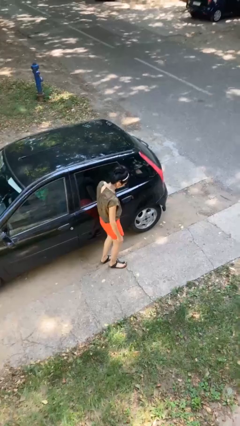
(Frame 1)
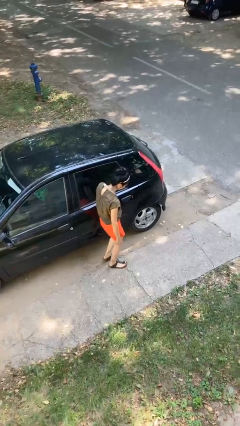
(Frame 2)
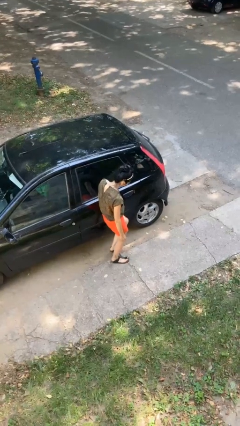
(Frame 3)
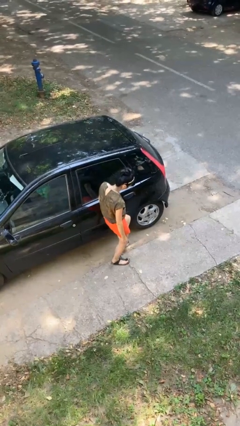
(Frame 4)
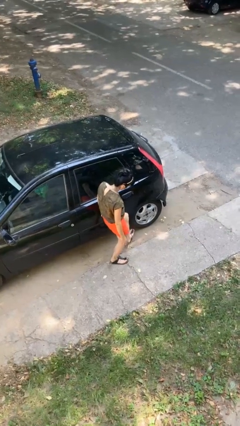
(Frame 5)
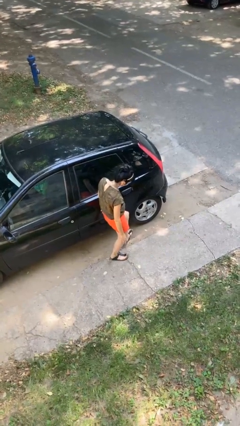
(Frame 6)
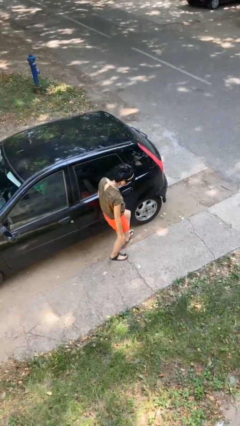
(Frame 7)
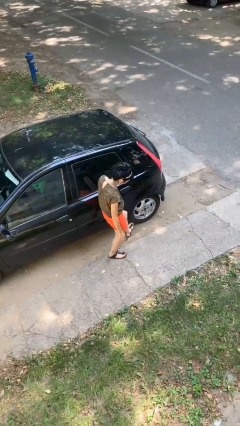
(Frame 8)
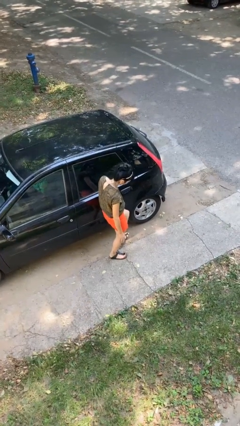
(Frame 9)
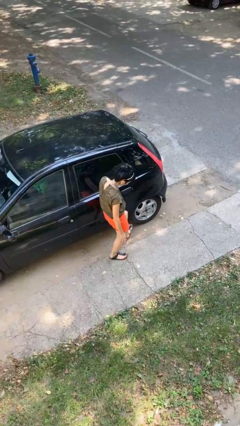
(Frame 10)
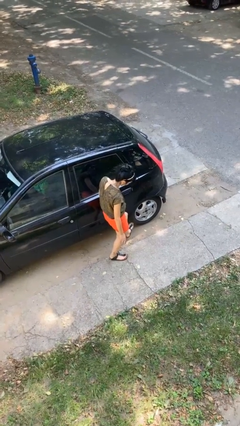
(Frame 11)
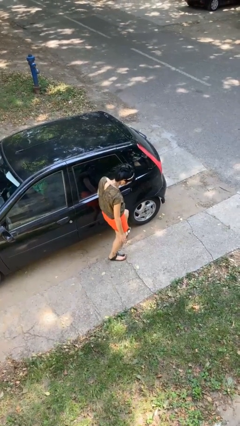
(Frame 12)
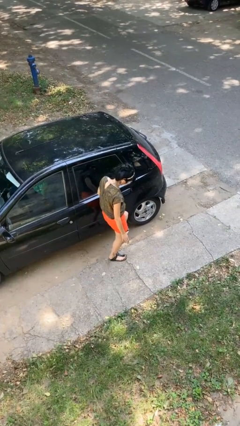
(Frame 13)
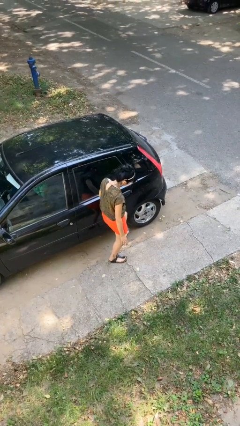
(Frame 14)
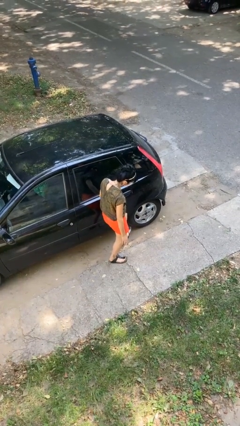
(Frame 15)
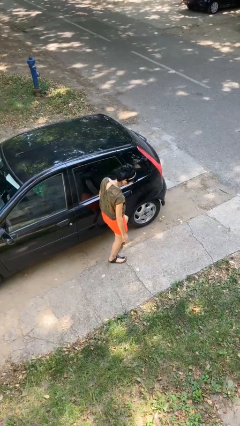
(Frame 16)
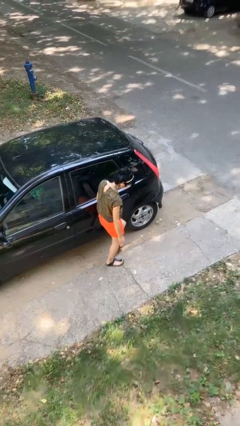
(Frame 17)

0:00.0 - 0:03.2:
person kicks car tires

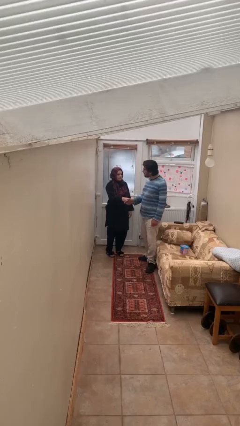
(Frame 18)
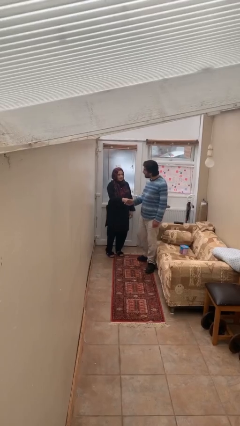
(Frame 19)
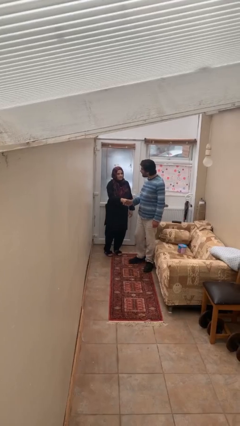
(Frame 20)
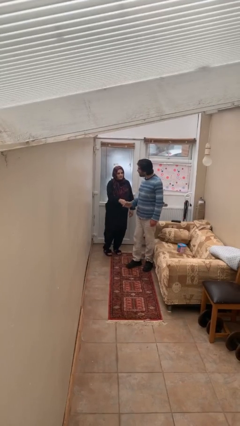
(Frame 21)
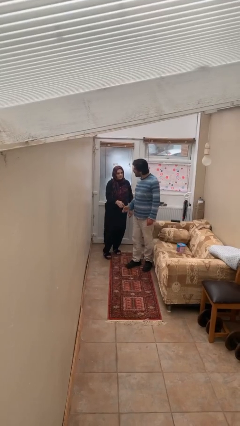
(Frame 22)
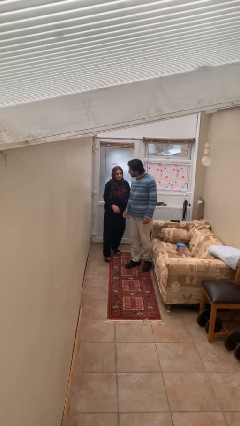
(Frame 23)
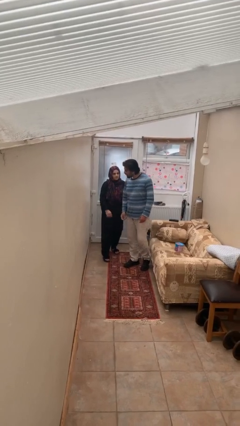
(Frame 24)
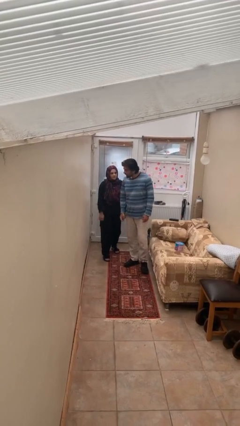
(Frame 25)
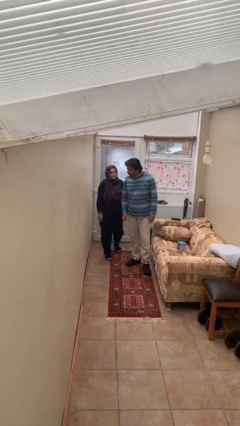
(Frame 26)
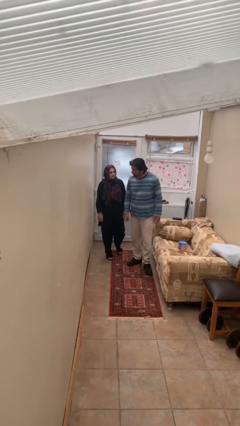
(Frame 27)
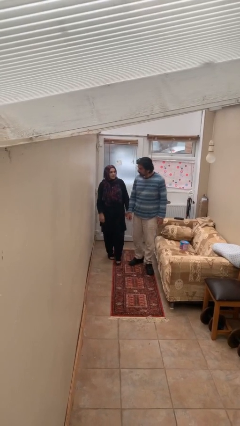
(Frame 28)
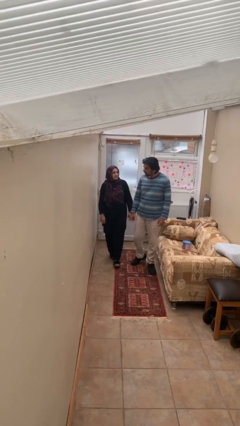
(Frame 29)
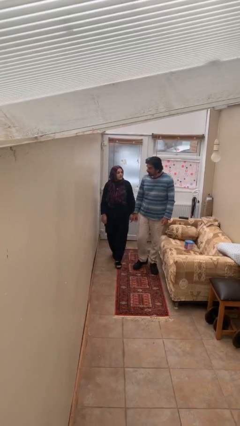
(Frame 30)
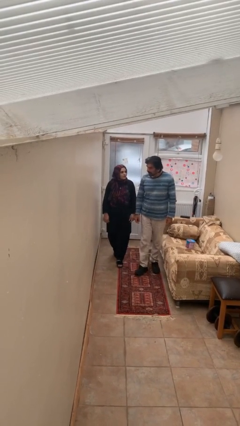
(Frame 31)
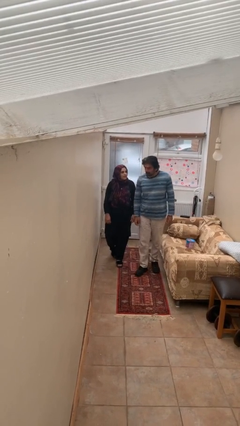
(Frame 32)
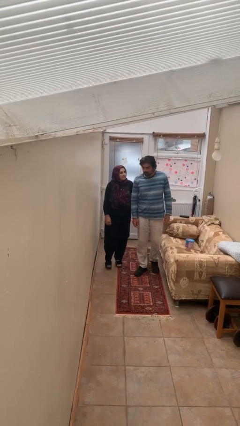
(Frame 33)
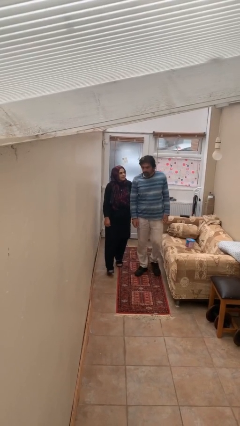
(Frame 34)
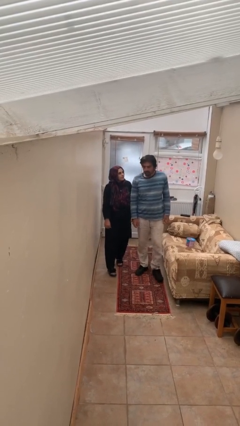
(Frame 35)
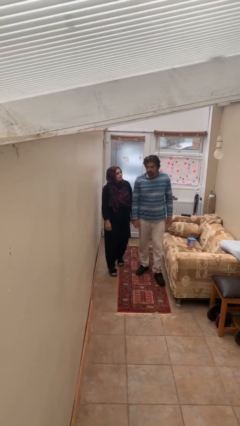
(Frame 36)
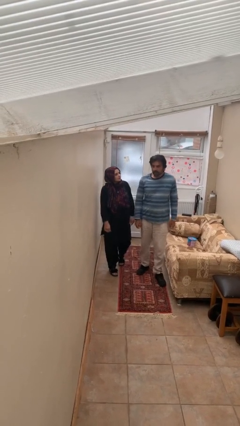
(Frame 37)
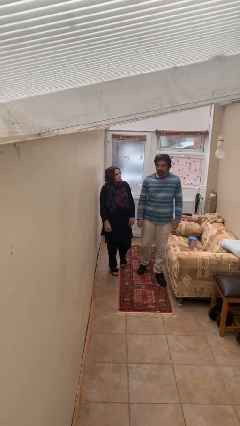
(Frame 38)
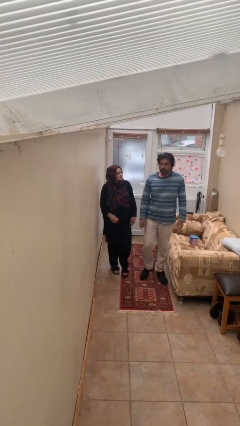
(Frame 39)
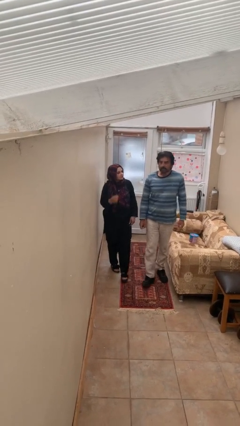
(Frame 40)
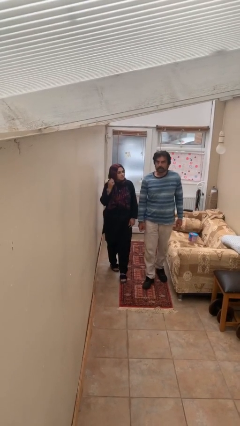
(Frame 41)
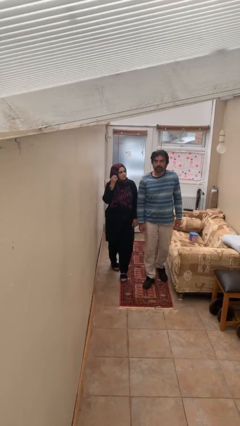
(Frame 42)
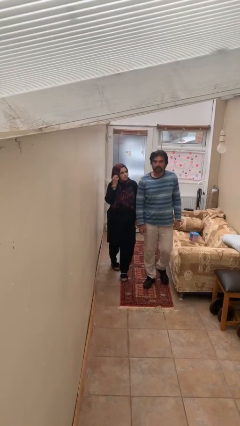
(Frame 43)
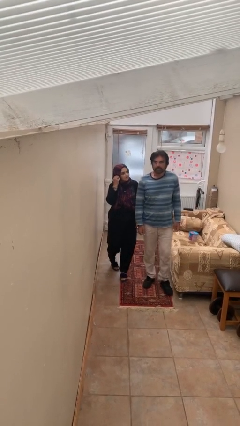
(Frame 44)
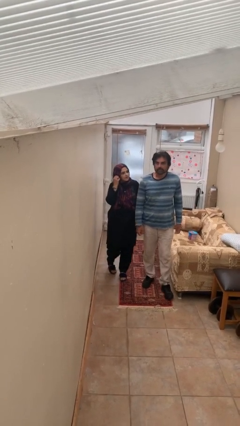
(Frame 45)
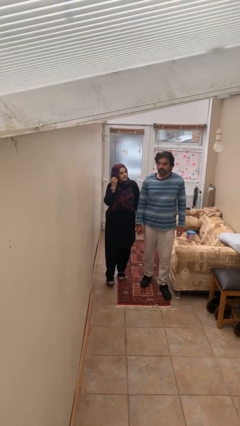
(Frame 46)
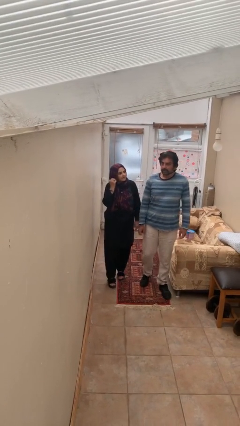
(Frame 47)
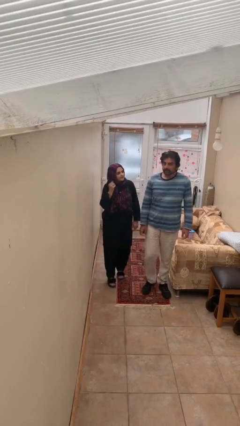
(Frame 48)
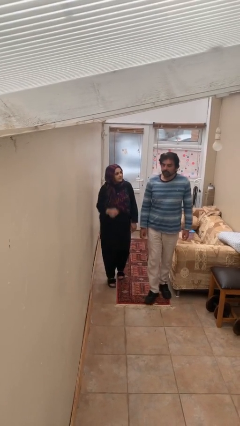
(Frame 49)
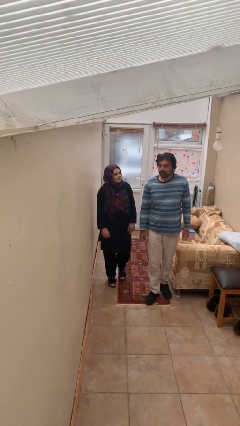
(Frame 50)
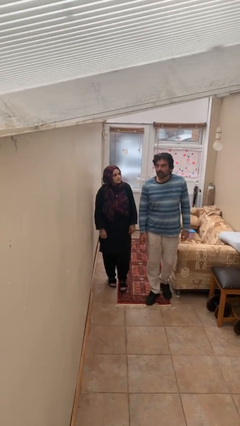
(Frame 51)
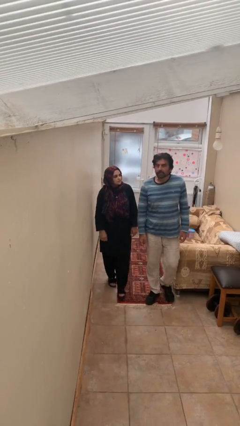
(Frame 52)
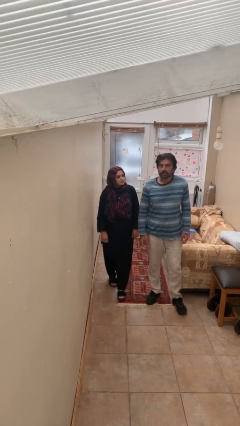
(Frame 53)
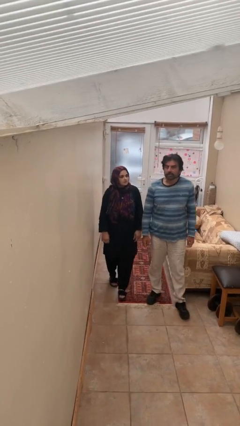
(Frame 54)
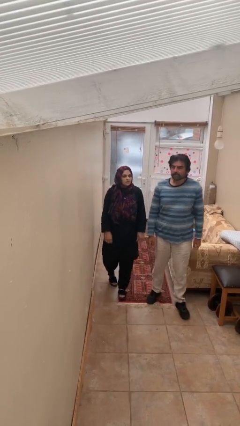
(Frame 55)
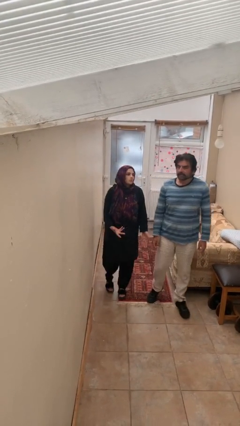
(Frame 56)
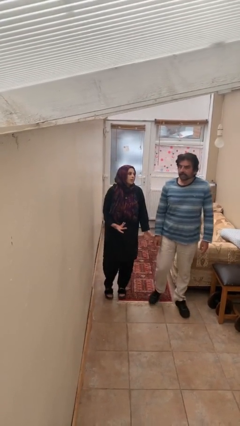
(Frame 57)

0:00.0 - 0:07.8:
person talks to person

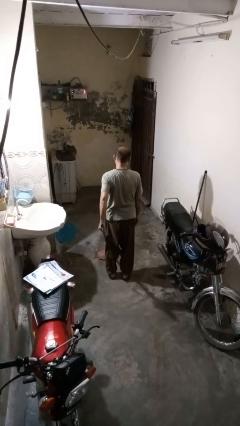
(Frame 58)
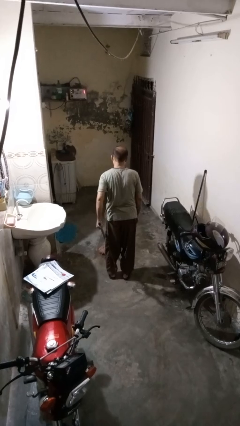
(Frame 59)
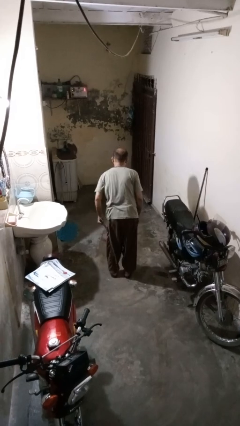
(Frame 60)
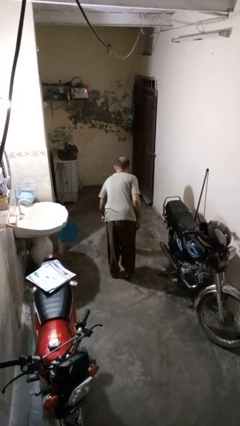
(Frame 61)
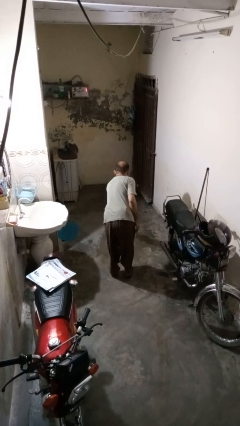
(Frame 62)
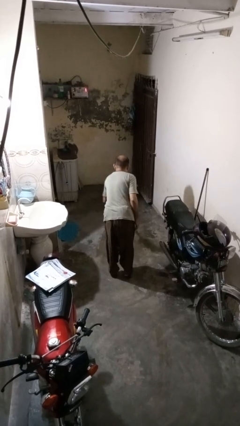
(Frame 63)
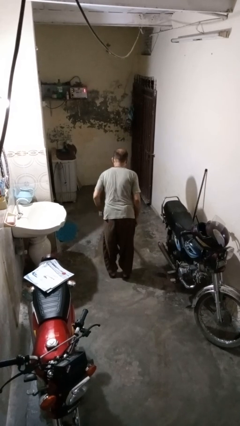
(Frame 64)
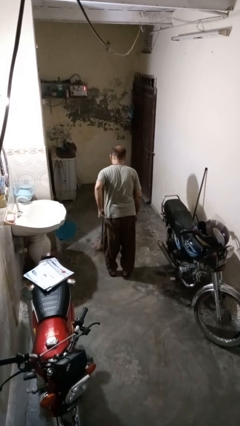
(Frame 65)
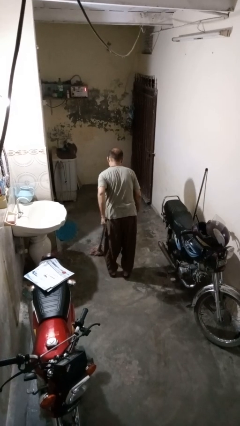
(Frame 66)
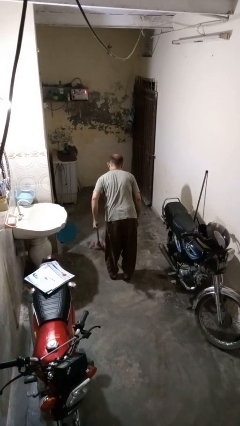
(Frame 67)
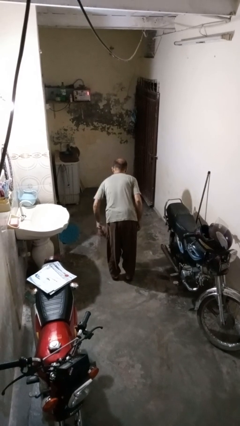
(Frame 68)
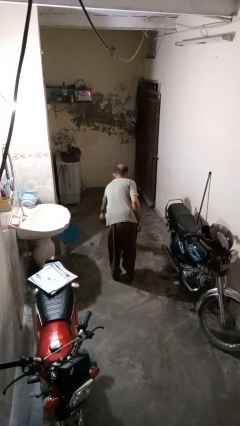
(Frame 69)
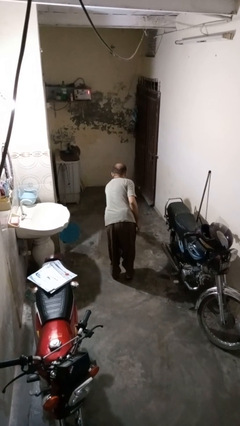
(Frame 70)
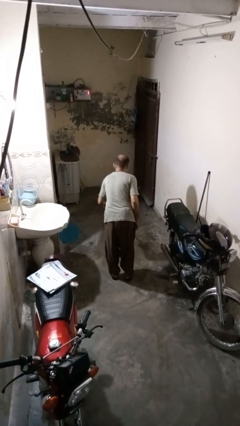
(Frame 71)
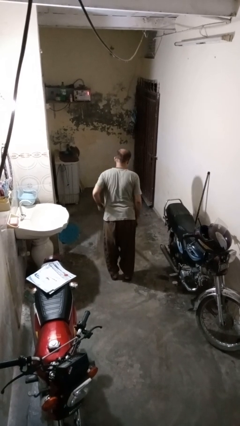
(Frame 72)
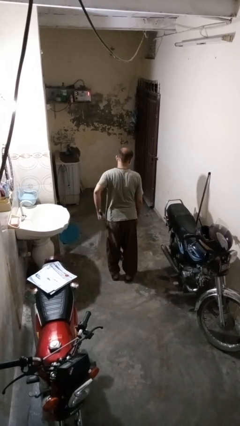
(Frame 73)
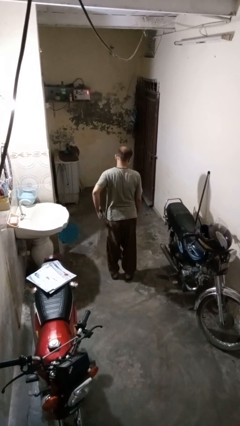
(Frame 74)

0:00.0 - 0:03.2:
person mops

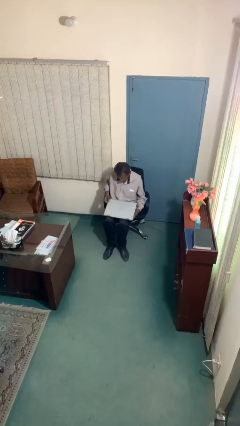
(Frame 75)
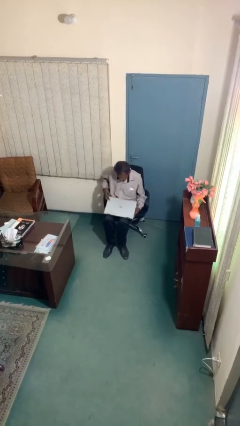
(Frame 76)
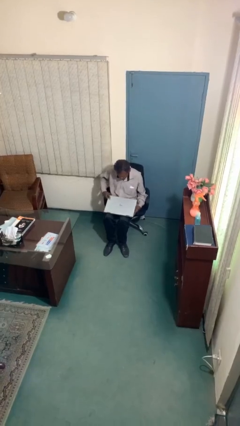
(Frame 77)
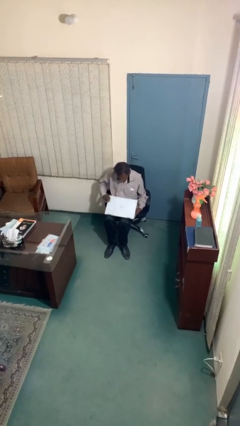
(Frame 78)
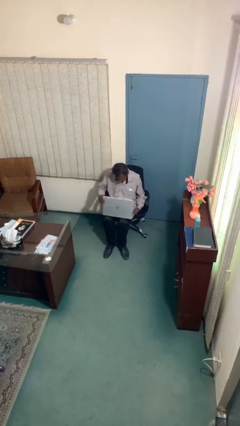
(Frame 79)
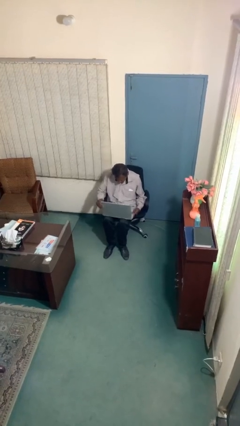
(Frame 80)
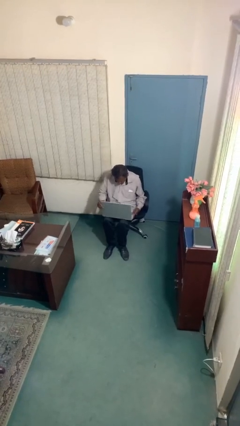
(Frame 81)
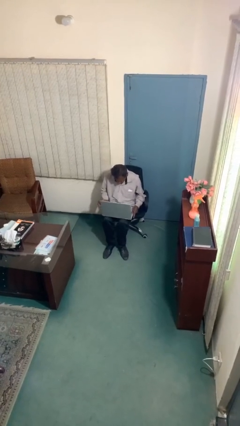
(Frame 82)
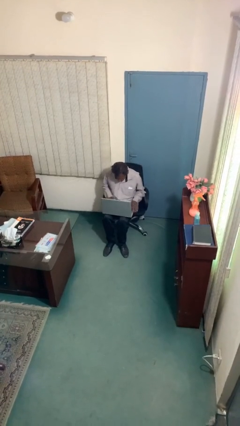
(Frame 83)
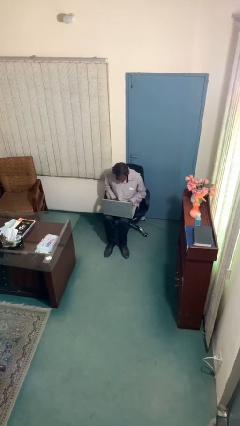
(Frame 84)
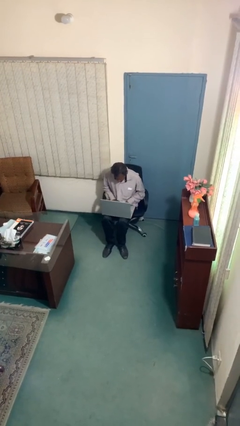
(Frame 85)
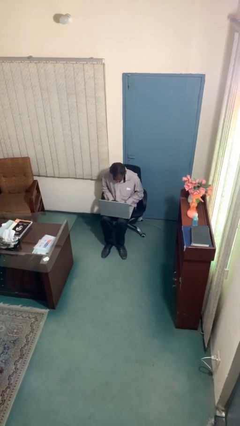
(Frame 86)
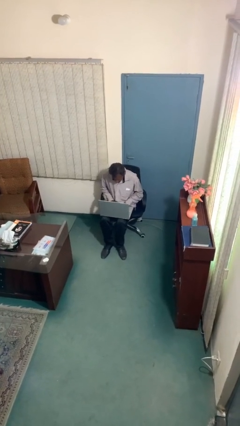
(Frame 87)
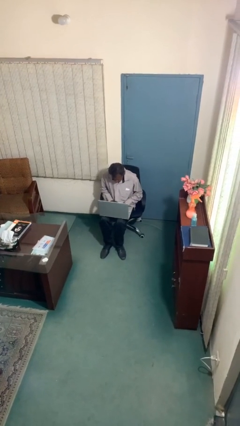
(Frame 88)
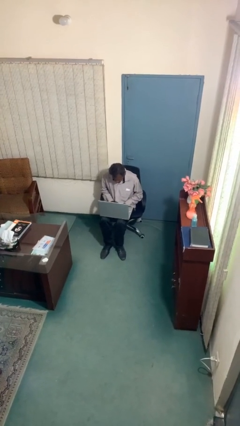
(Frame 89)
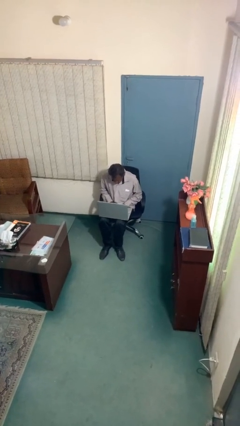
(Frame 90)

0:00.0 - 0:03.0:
person interacts with laptop

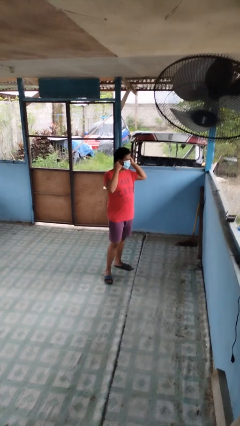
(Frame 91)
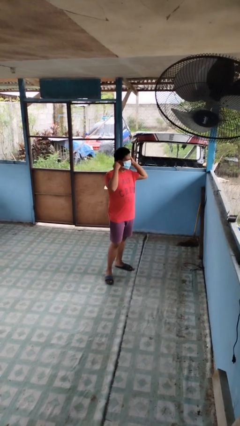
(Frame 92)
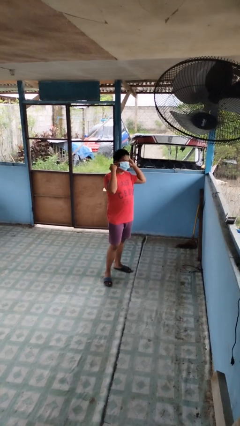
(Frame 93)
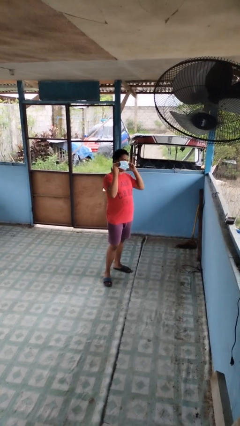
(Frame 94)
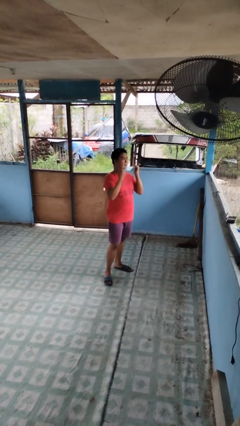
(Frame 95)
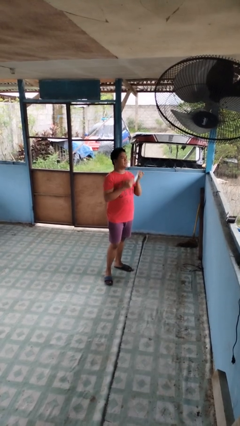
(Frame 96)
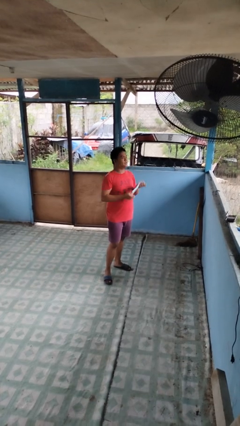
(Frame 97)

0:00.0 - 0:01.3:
person takes off facemask
